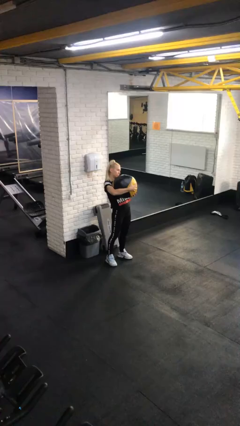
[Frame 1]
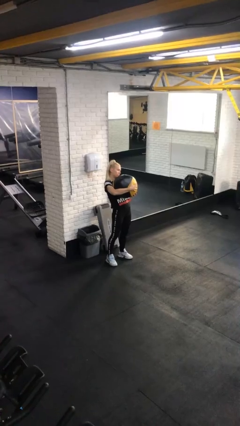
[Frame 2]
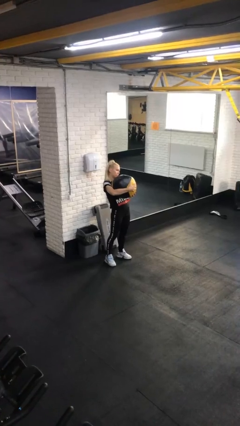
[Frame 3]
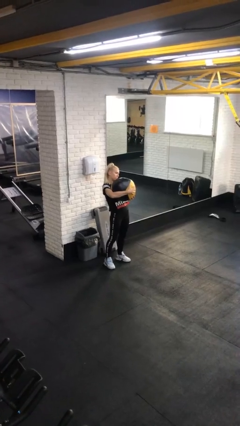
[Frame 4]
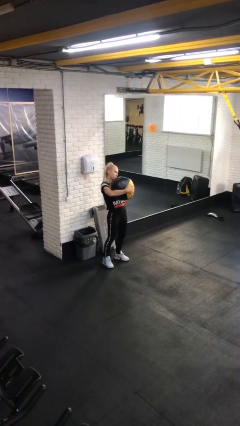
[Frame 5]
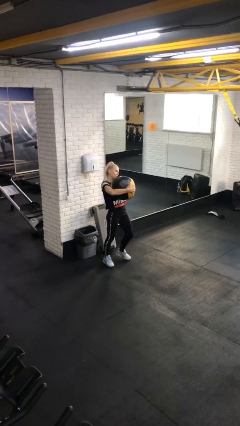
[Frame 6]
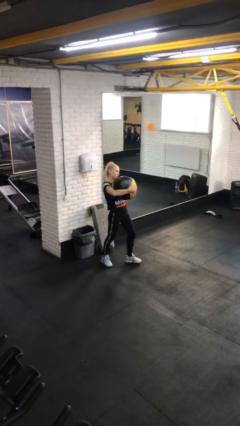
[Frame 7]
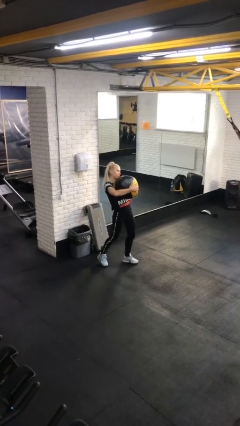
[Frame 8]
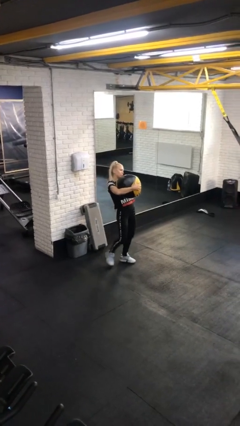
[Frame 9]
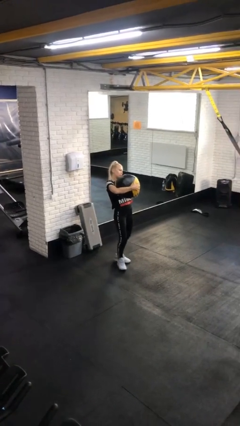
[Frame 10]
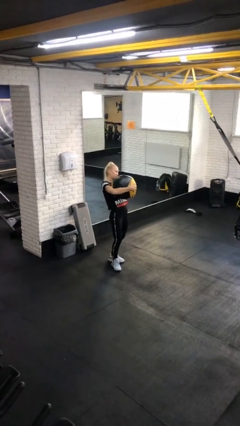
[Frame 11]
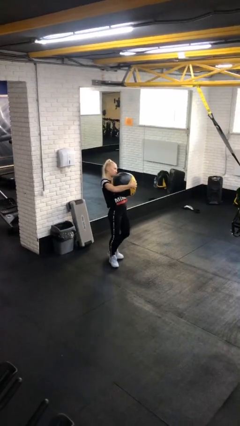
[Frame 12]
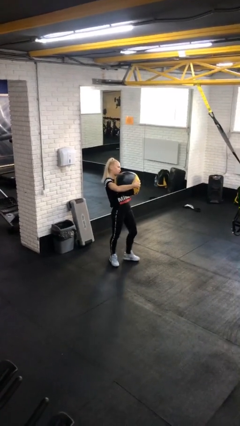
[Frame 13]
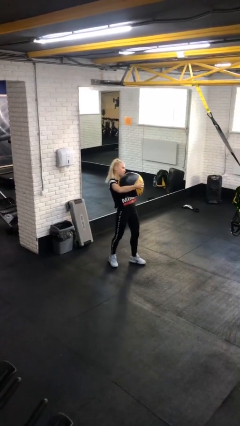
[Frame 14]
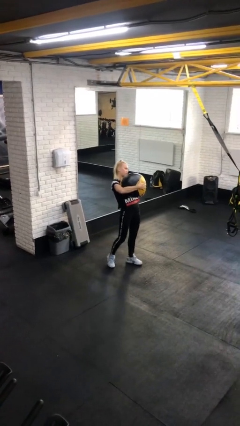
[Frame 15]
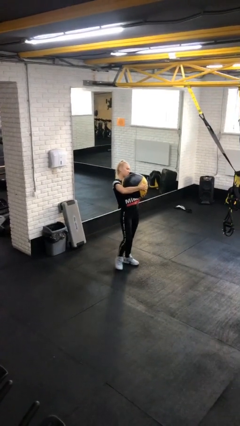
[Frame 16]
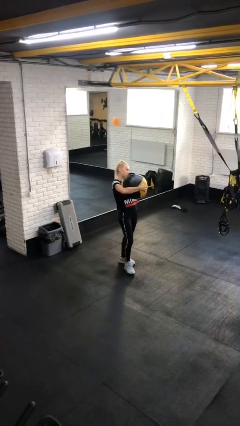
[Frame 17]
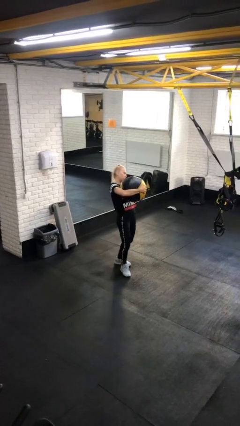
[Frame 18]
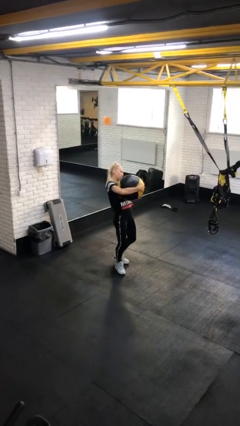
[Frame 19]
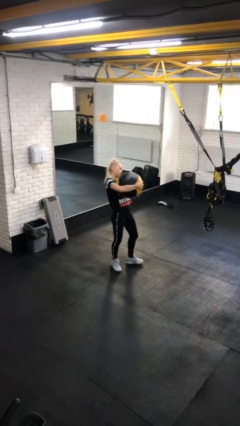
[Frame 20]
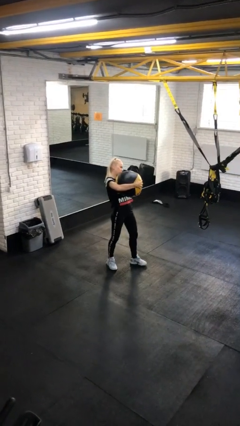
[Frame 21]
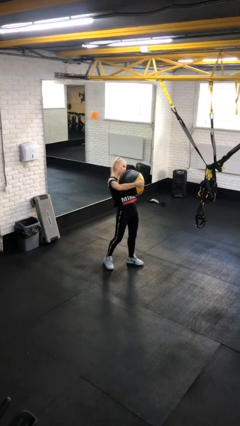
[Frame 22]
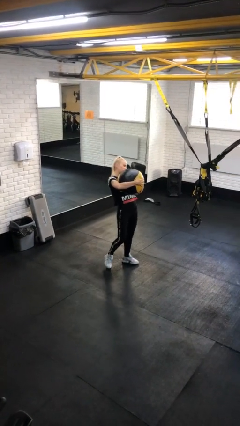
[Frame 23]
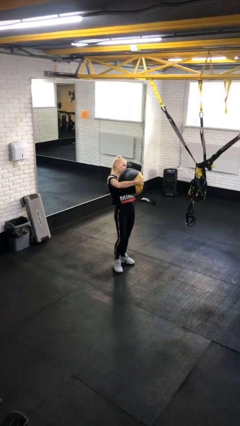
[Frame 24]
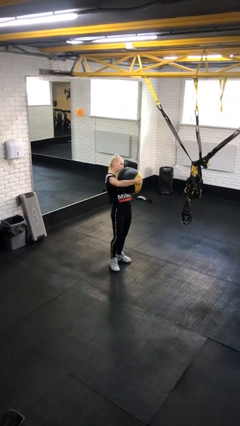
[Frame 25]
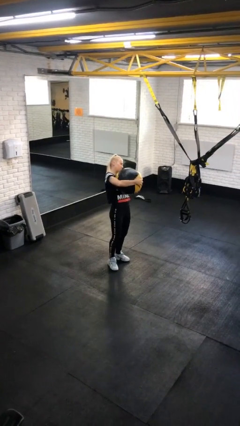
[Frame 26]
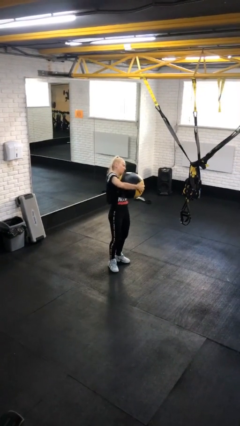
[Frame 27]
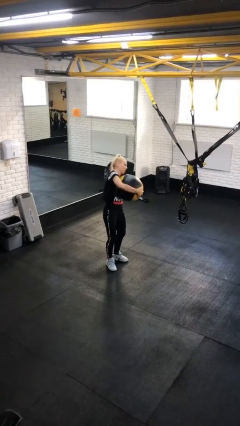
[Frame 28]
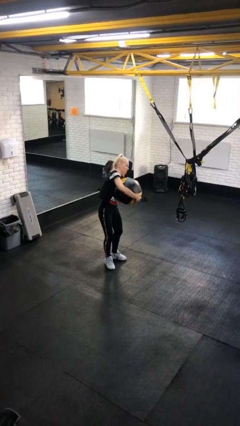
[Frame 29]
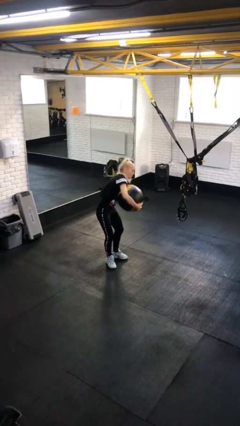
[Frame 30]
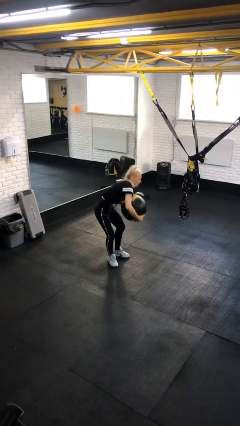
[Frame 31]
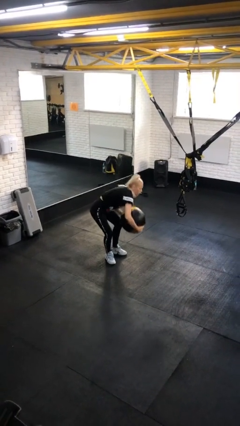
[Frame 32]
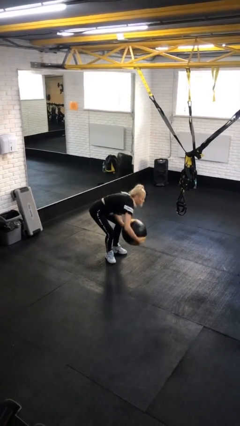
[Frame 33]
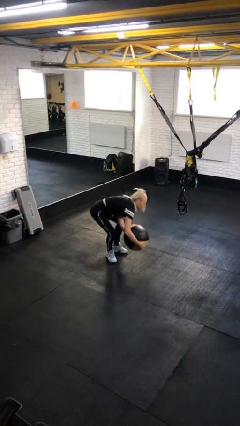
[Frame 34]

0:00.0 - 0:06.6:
person carries heavy object

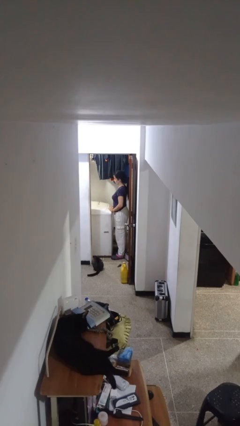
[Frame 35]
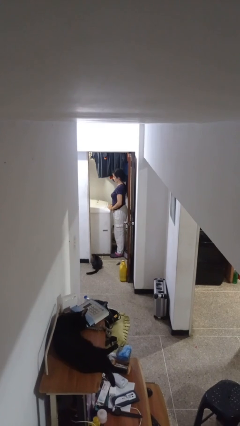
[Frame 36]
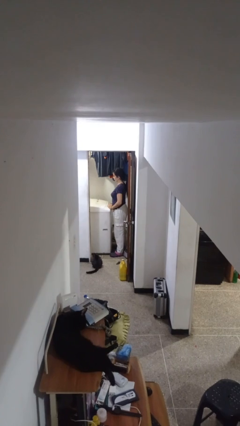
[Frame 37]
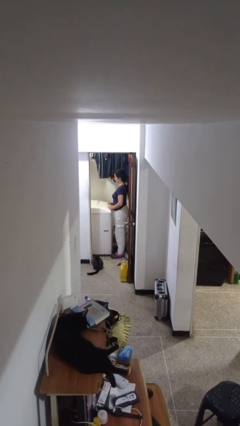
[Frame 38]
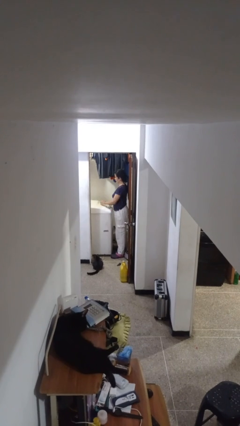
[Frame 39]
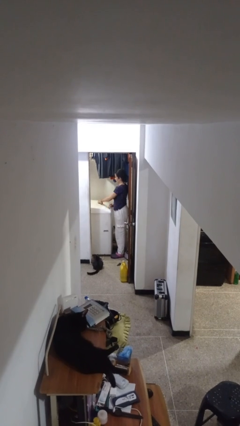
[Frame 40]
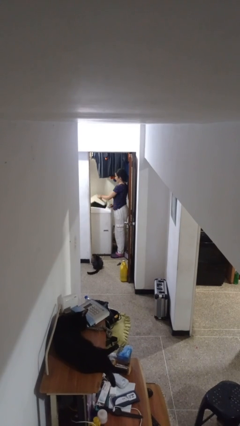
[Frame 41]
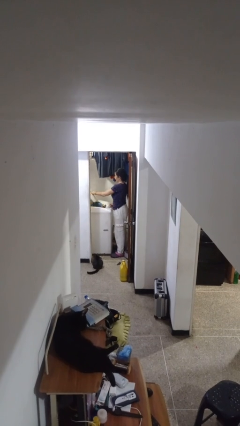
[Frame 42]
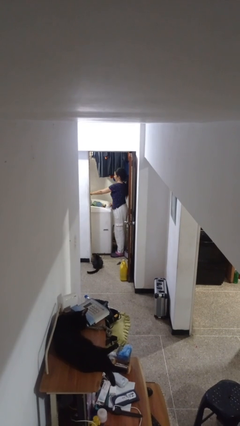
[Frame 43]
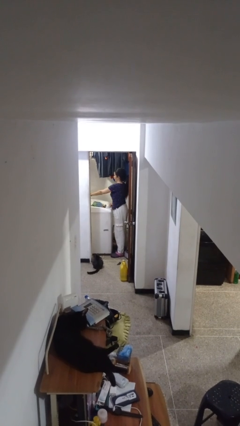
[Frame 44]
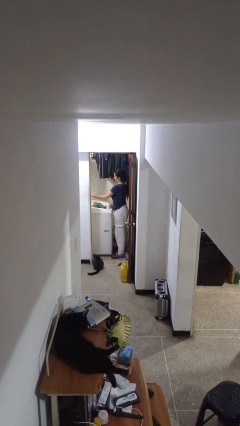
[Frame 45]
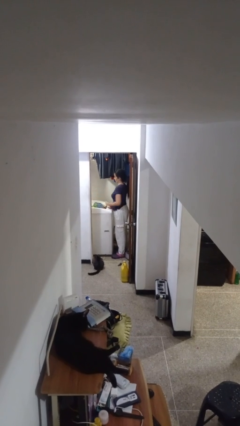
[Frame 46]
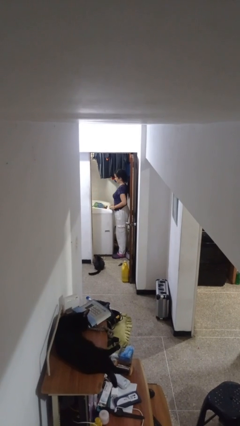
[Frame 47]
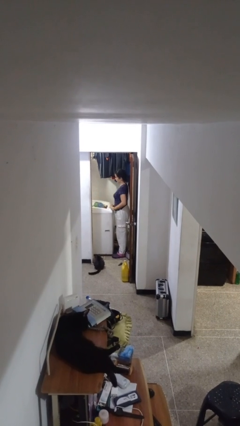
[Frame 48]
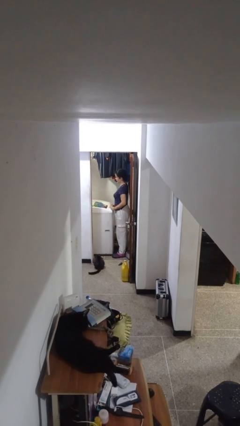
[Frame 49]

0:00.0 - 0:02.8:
person opens clothes washer

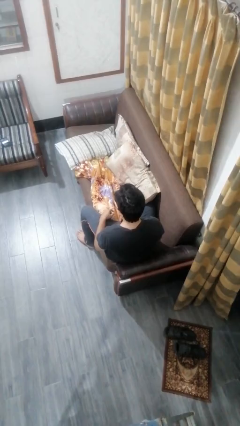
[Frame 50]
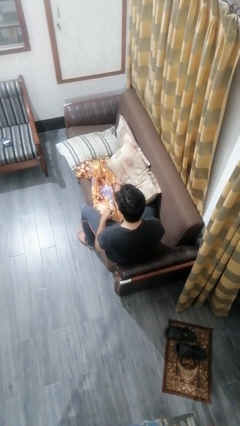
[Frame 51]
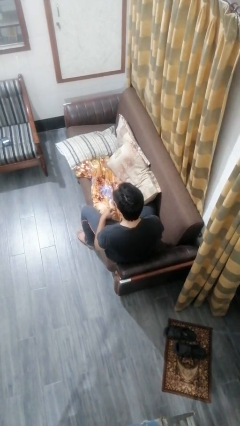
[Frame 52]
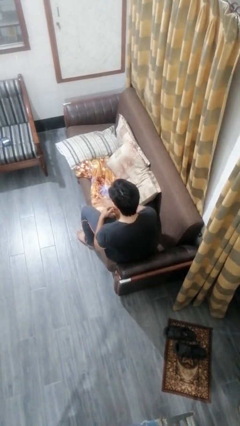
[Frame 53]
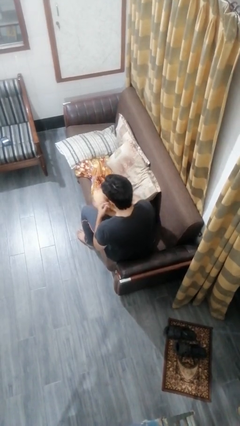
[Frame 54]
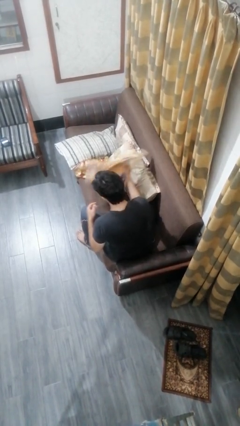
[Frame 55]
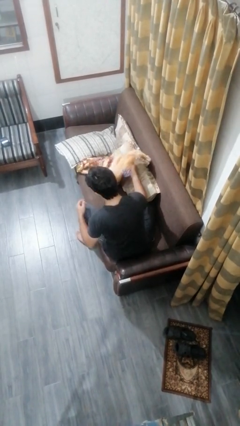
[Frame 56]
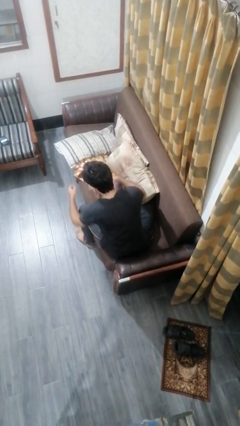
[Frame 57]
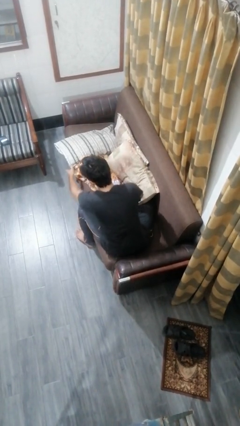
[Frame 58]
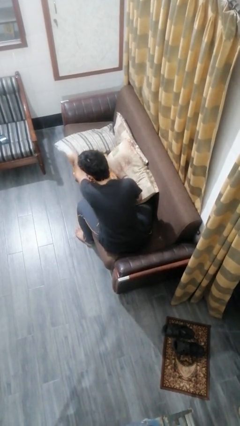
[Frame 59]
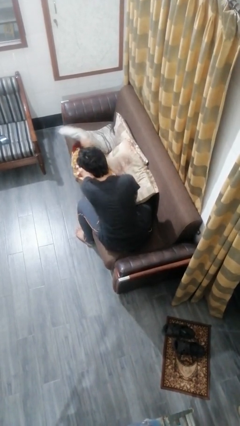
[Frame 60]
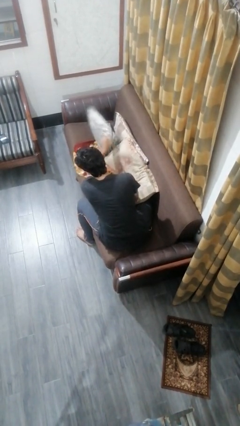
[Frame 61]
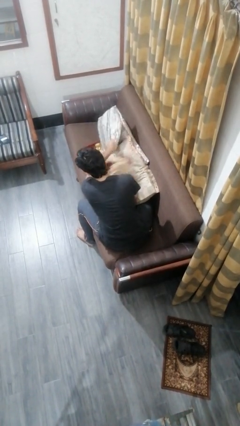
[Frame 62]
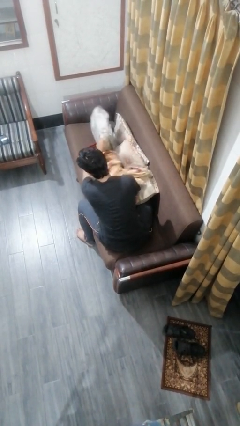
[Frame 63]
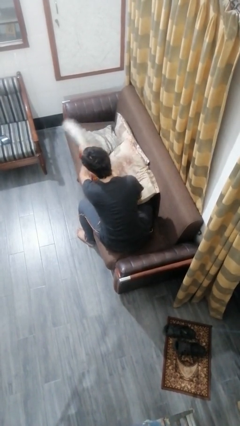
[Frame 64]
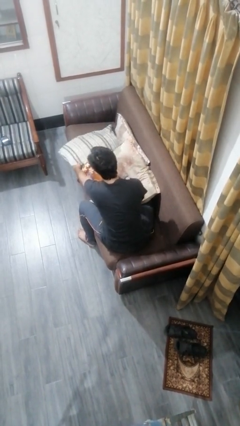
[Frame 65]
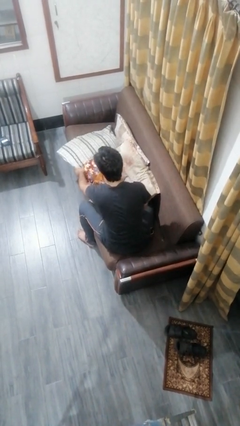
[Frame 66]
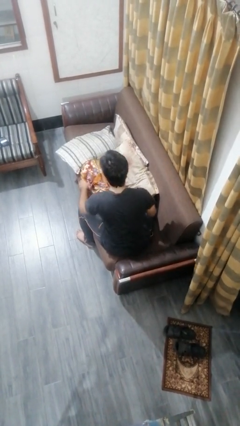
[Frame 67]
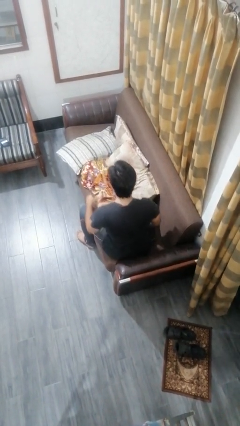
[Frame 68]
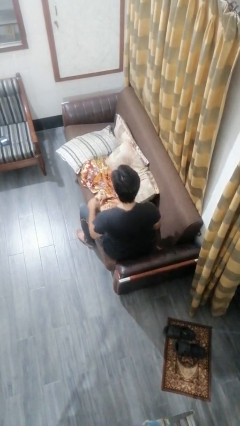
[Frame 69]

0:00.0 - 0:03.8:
person searches in couch

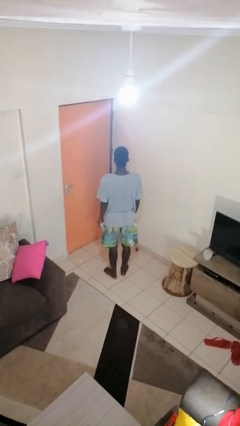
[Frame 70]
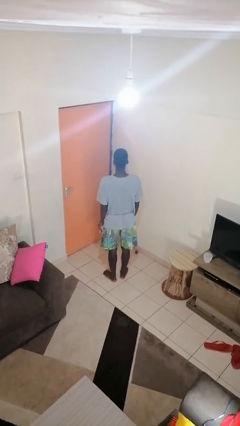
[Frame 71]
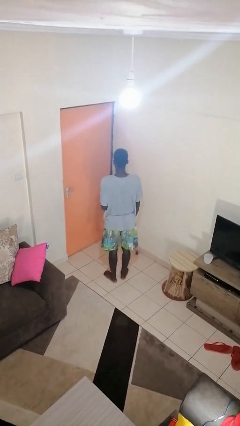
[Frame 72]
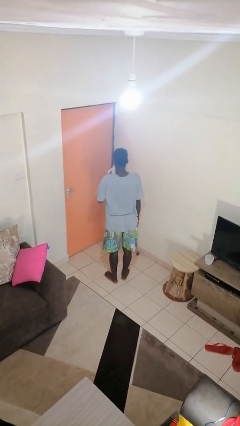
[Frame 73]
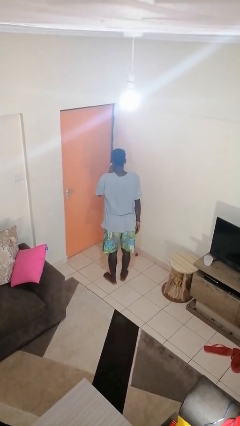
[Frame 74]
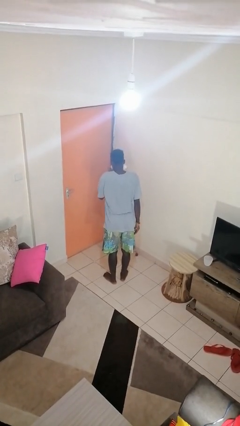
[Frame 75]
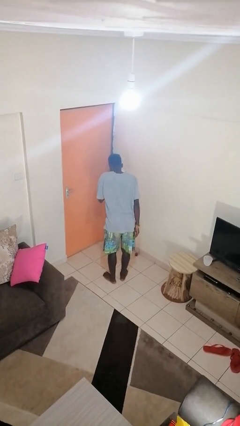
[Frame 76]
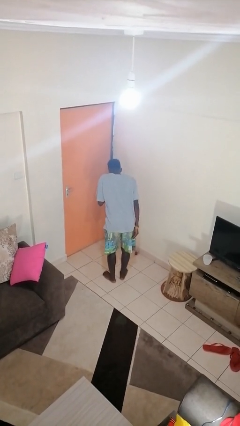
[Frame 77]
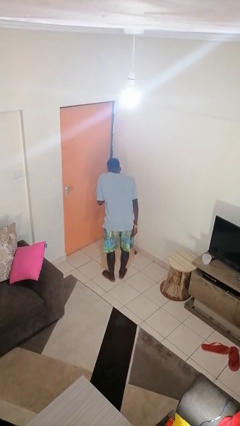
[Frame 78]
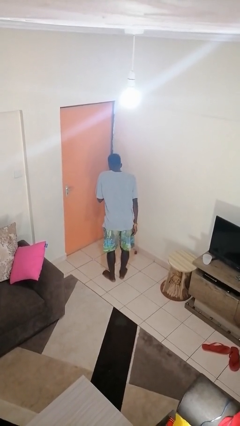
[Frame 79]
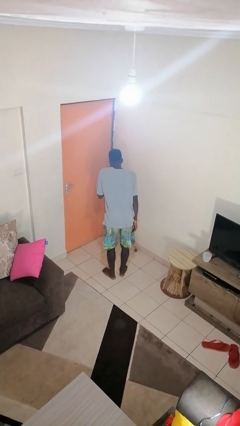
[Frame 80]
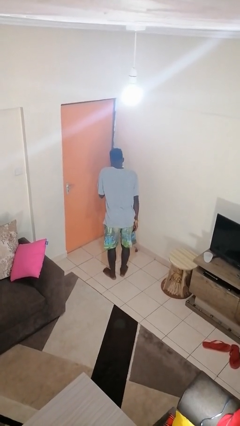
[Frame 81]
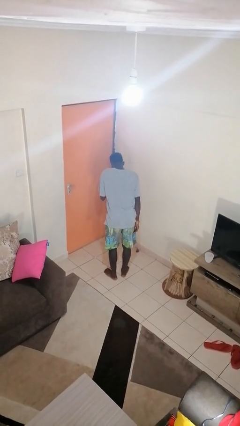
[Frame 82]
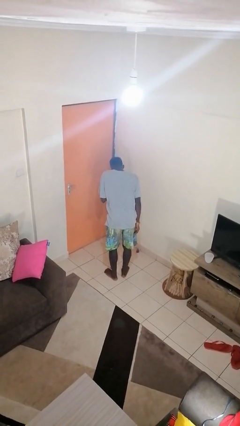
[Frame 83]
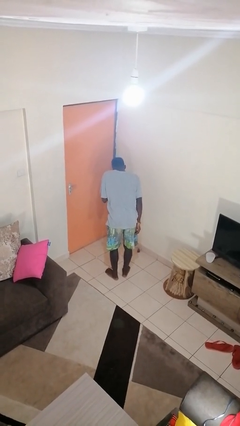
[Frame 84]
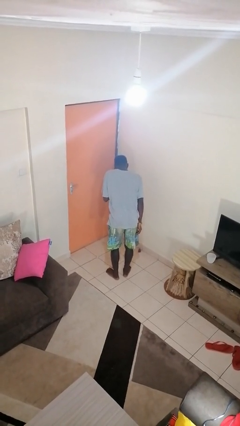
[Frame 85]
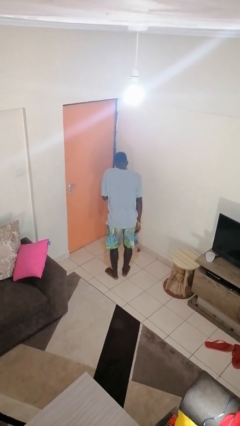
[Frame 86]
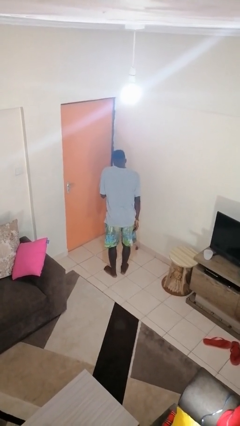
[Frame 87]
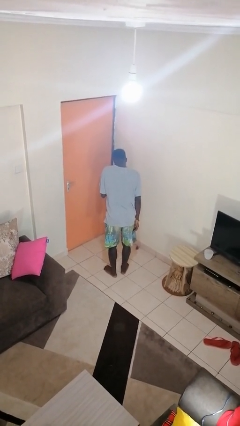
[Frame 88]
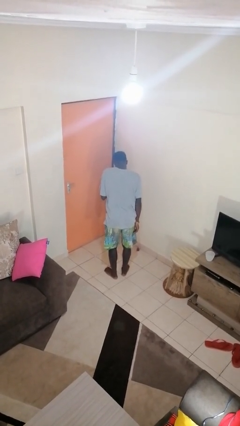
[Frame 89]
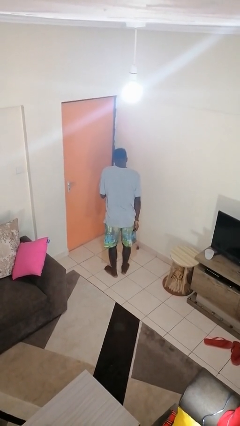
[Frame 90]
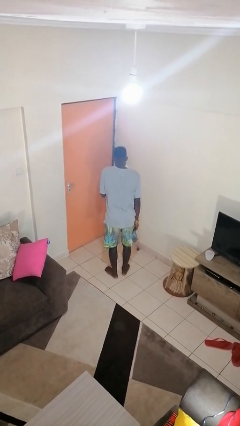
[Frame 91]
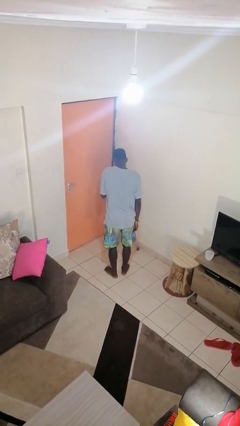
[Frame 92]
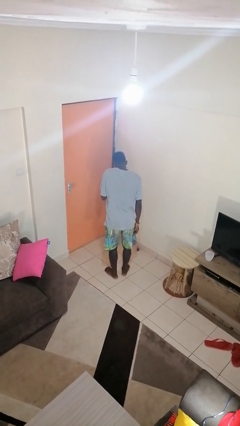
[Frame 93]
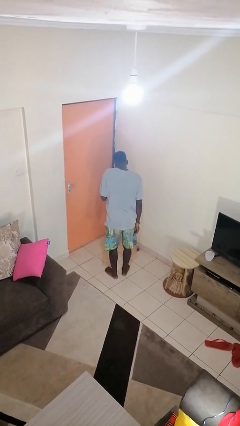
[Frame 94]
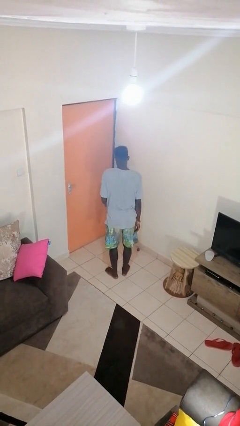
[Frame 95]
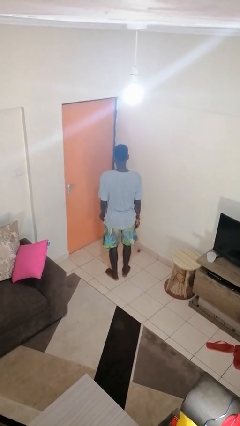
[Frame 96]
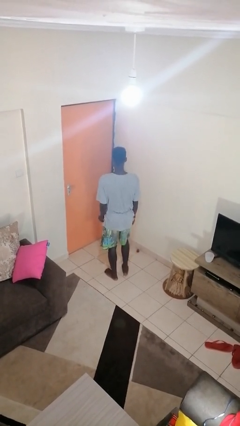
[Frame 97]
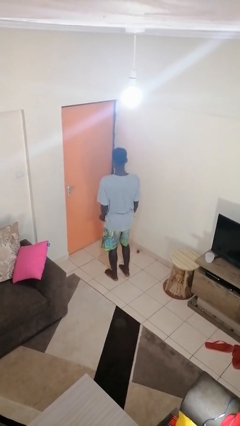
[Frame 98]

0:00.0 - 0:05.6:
person blows nose
